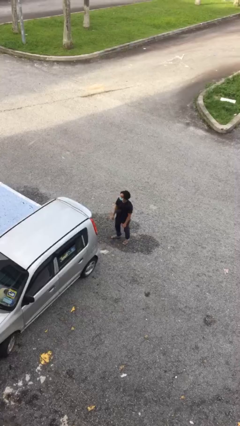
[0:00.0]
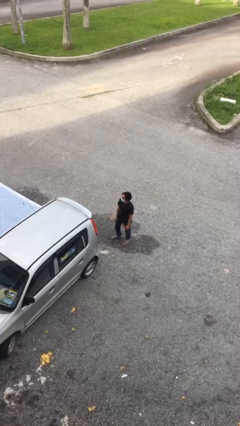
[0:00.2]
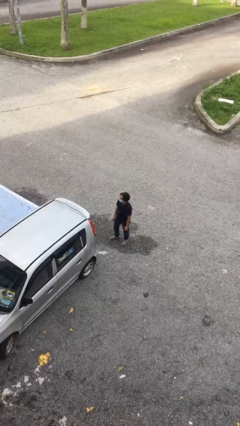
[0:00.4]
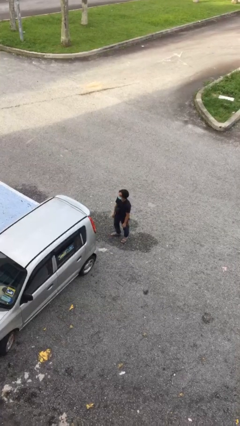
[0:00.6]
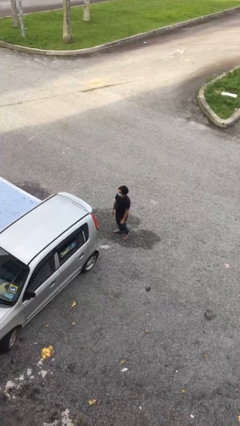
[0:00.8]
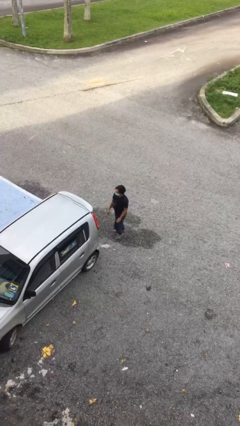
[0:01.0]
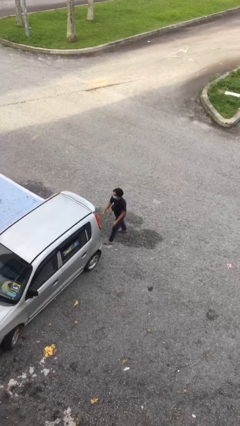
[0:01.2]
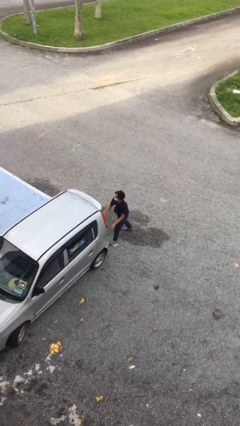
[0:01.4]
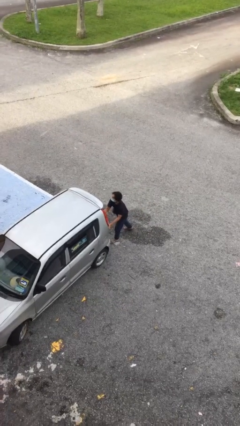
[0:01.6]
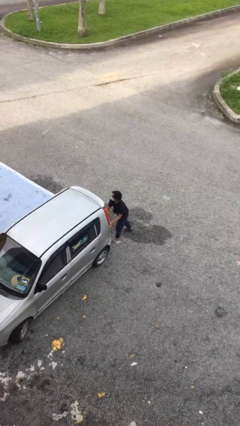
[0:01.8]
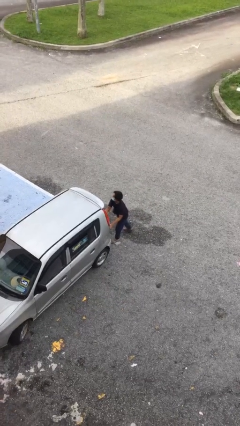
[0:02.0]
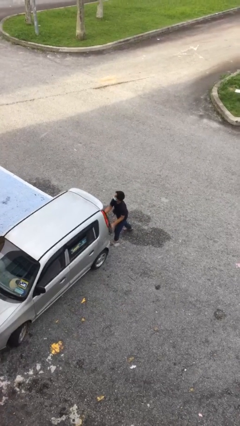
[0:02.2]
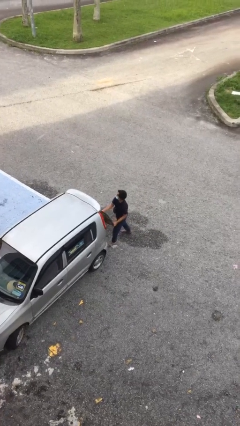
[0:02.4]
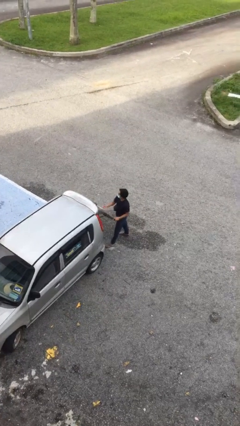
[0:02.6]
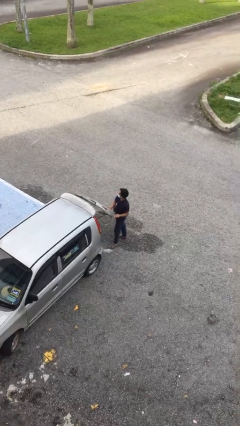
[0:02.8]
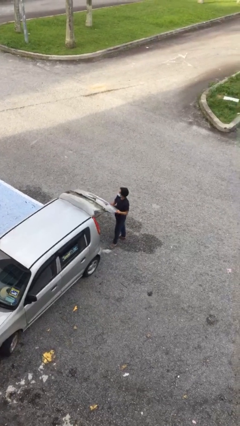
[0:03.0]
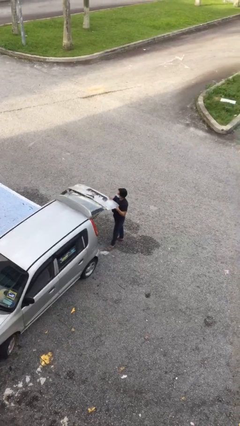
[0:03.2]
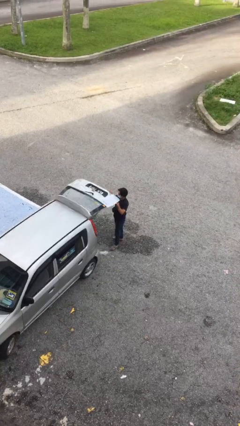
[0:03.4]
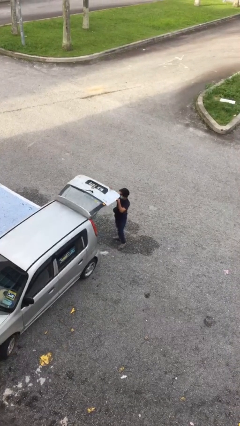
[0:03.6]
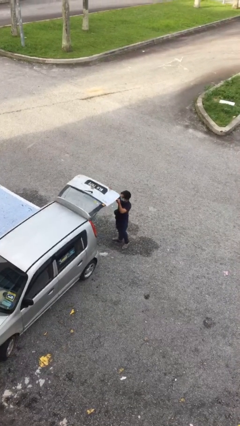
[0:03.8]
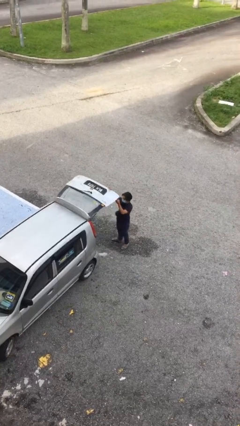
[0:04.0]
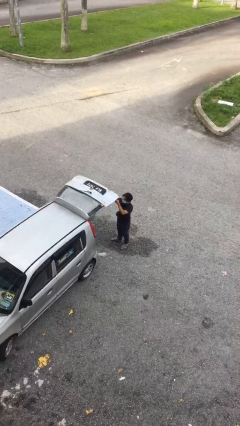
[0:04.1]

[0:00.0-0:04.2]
person opens car trunk

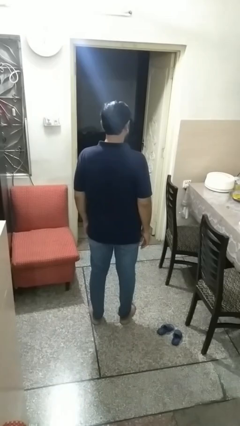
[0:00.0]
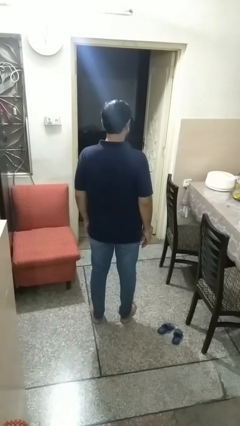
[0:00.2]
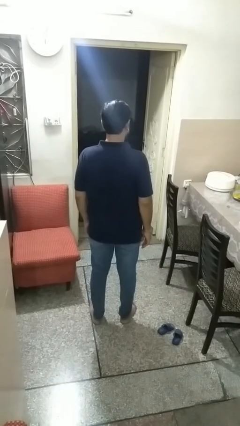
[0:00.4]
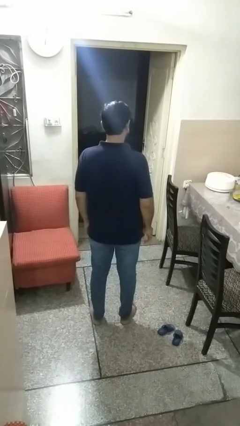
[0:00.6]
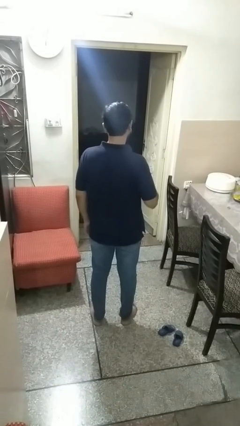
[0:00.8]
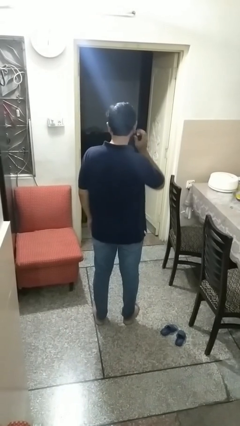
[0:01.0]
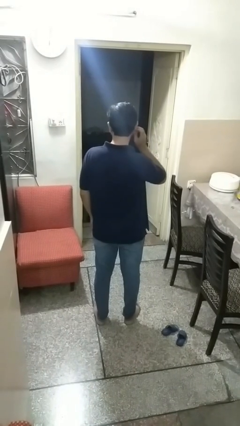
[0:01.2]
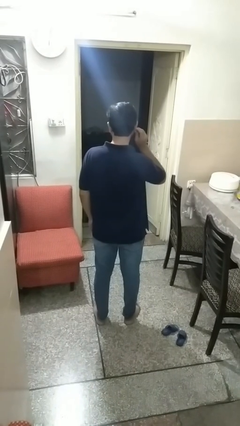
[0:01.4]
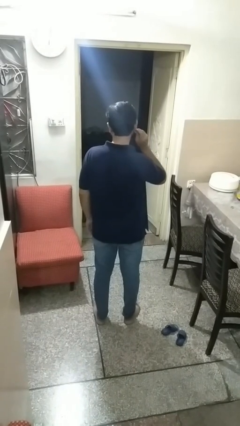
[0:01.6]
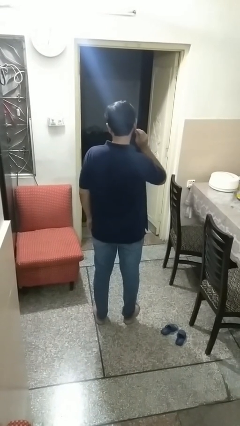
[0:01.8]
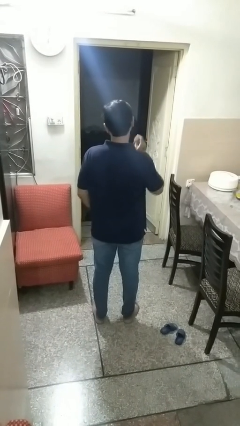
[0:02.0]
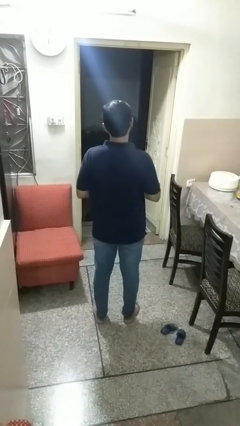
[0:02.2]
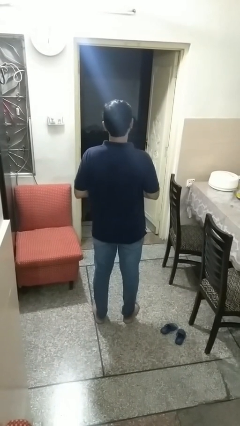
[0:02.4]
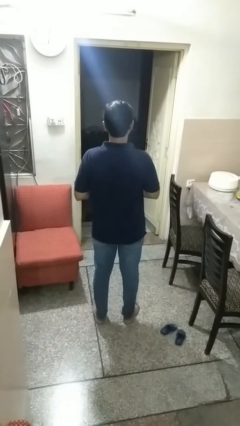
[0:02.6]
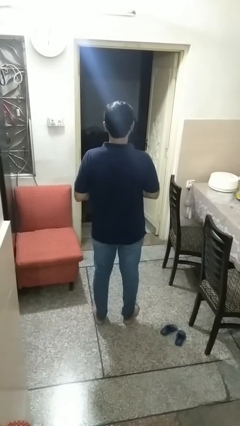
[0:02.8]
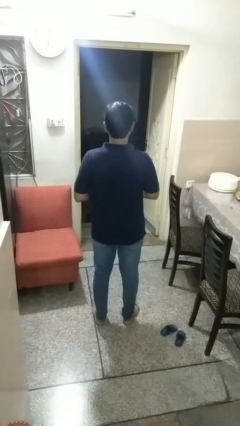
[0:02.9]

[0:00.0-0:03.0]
person takes off earrings

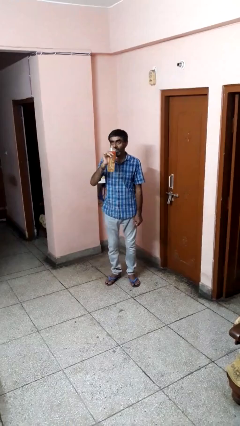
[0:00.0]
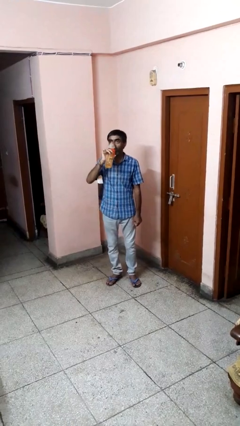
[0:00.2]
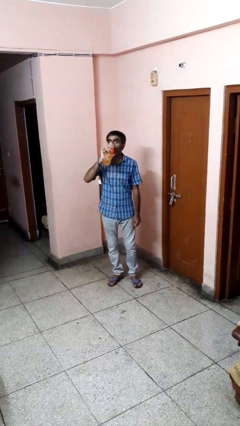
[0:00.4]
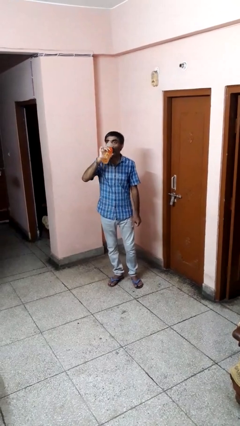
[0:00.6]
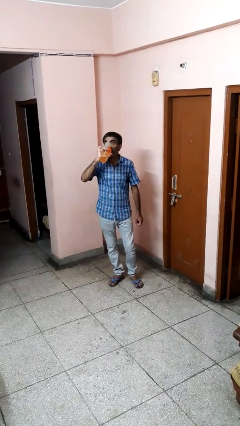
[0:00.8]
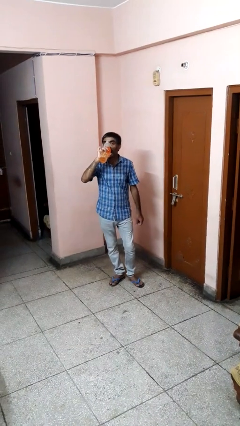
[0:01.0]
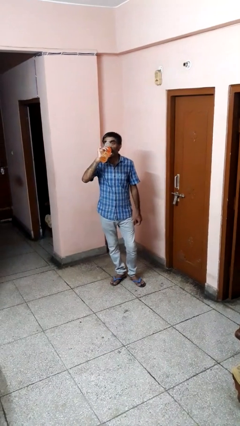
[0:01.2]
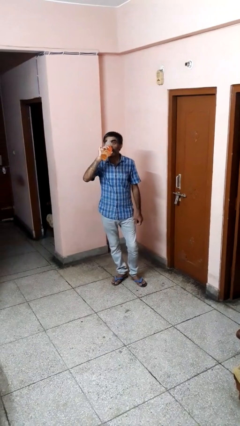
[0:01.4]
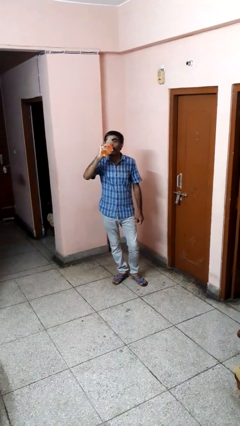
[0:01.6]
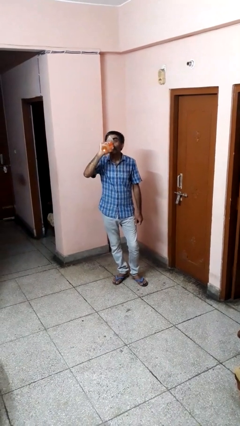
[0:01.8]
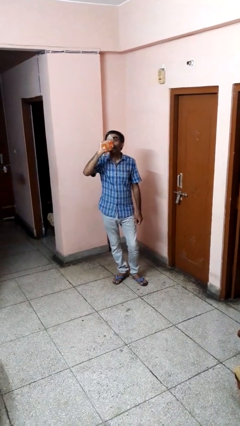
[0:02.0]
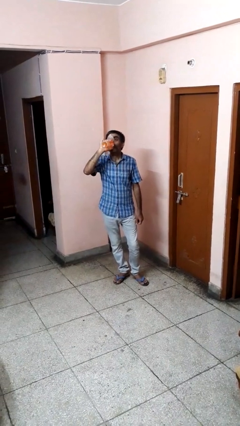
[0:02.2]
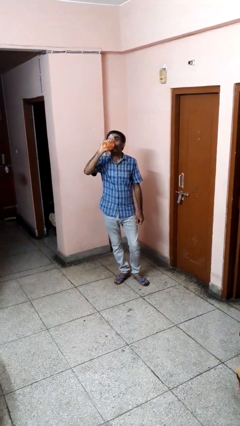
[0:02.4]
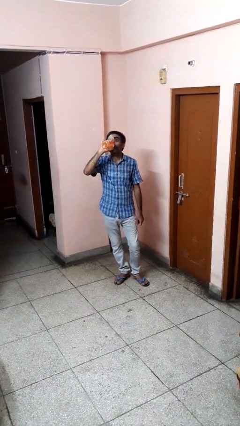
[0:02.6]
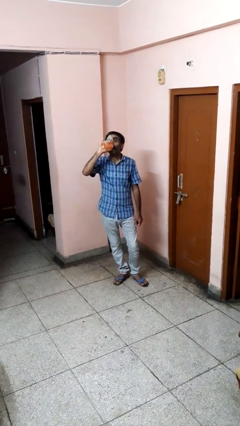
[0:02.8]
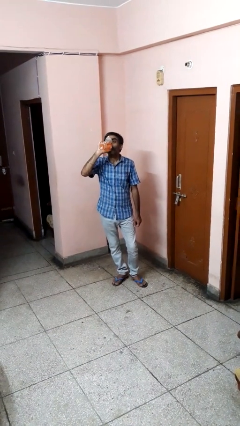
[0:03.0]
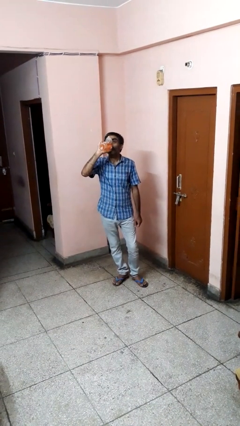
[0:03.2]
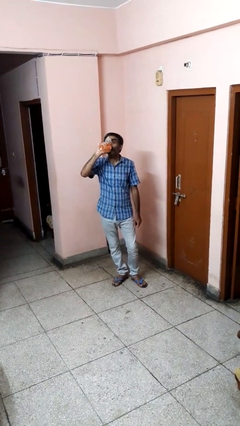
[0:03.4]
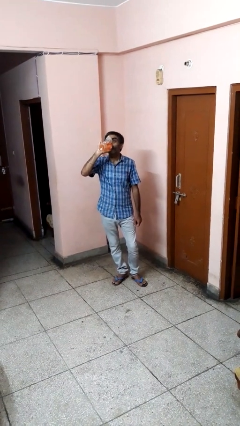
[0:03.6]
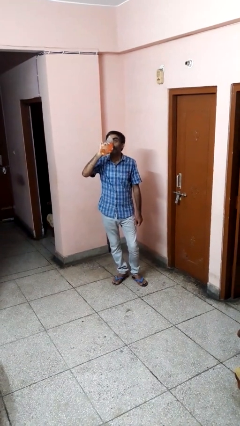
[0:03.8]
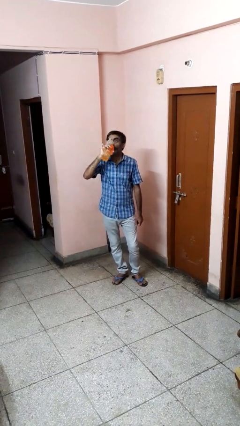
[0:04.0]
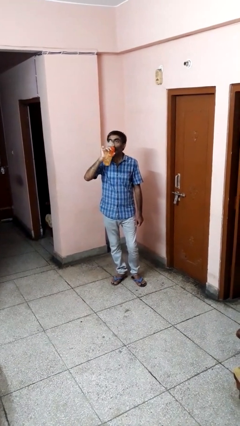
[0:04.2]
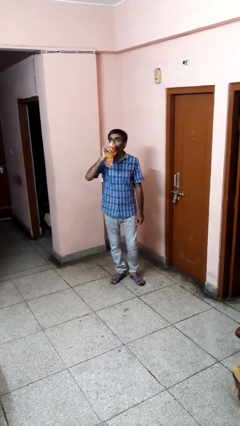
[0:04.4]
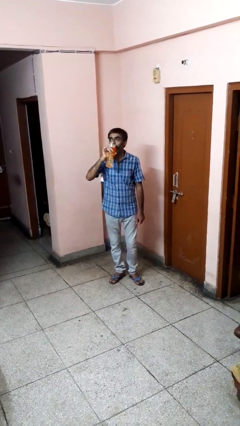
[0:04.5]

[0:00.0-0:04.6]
person drinks from bottle

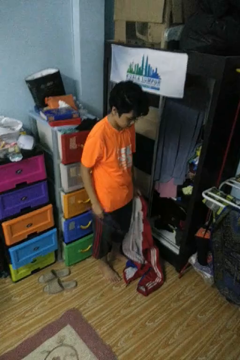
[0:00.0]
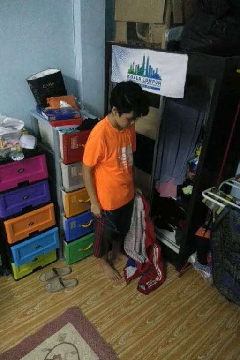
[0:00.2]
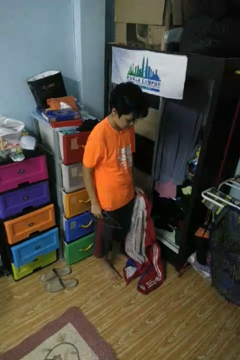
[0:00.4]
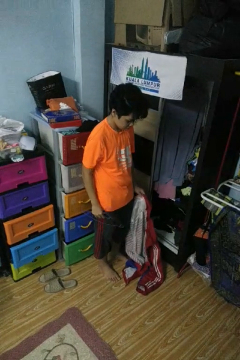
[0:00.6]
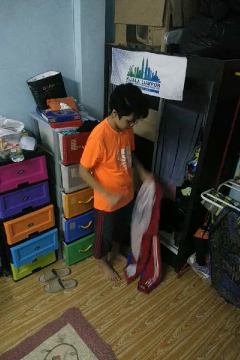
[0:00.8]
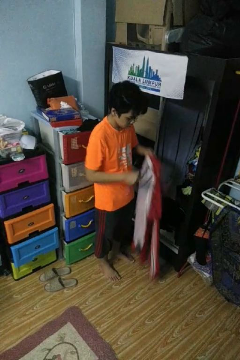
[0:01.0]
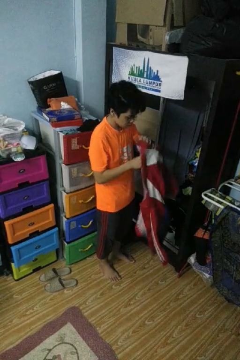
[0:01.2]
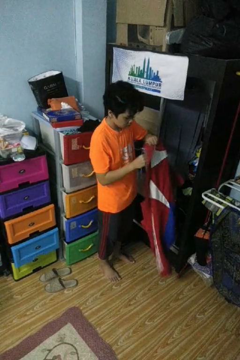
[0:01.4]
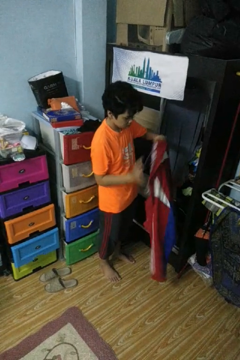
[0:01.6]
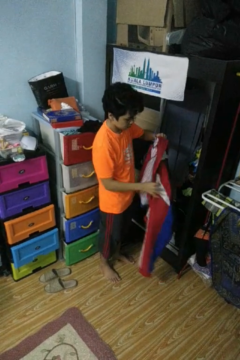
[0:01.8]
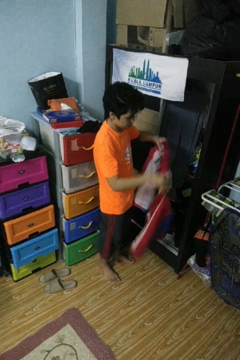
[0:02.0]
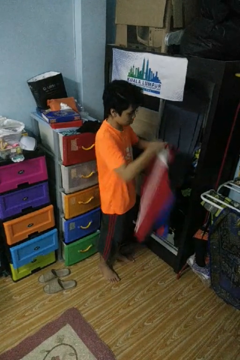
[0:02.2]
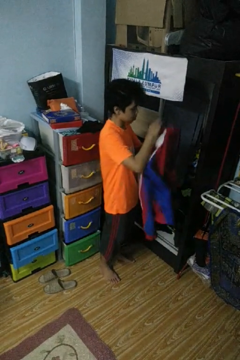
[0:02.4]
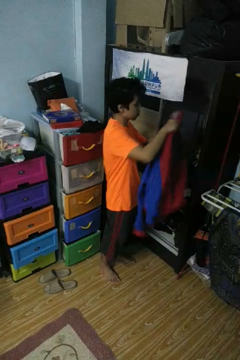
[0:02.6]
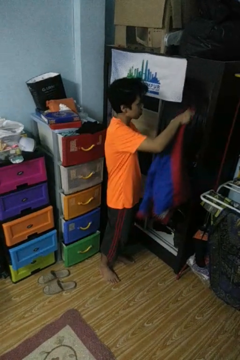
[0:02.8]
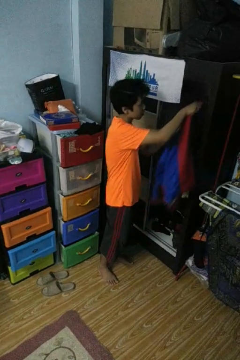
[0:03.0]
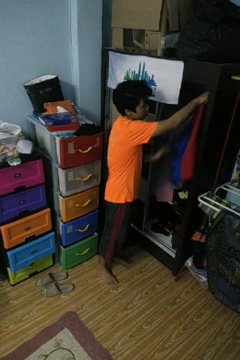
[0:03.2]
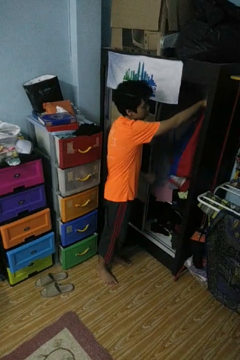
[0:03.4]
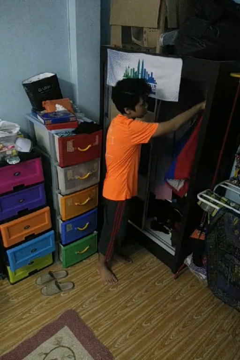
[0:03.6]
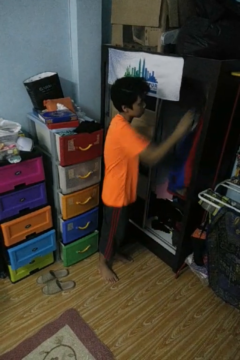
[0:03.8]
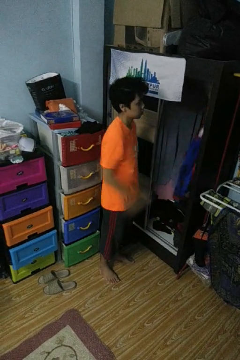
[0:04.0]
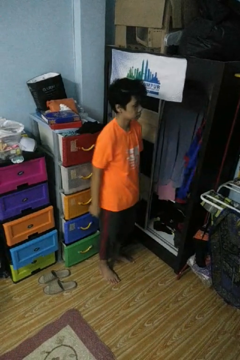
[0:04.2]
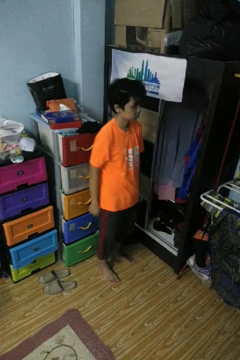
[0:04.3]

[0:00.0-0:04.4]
person puts clothes into closet

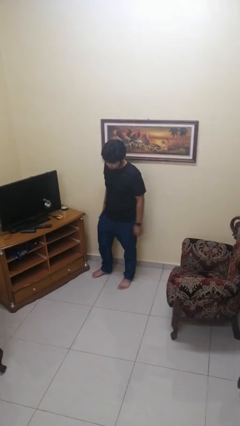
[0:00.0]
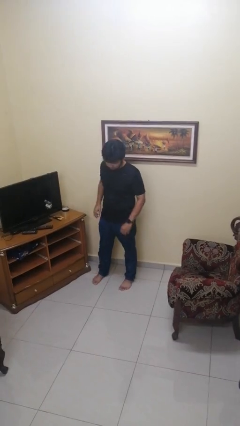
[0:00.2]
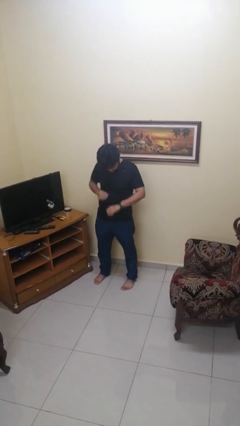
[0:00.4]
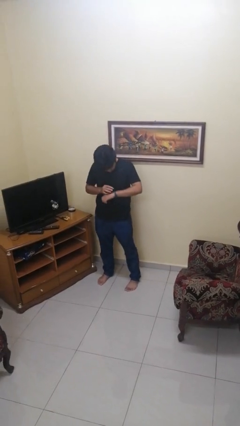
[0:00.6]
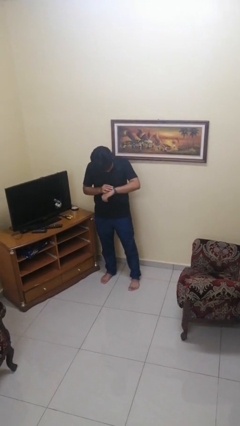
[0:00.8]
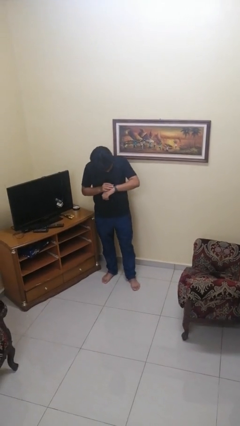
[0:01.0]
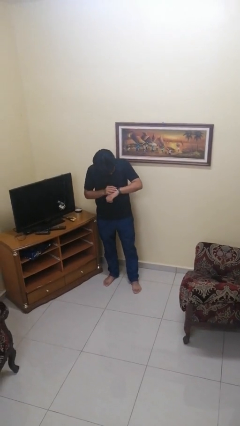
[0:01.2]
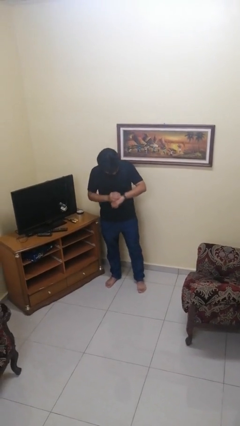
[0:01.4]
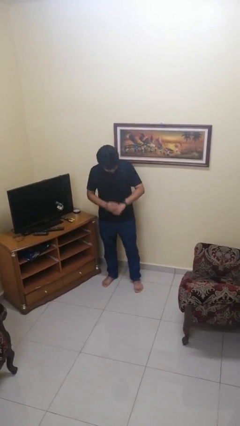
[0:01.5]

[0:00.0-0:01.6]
person looks at wristwatch

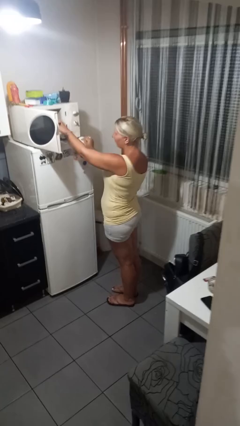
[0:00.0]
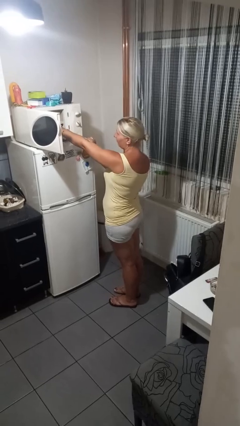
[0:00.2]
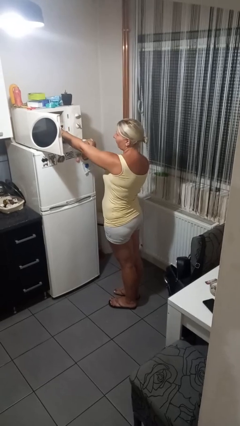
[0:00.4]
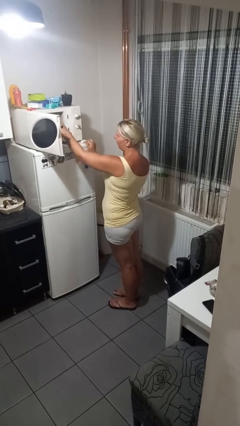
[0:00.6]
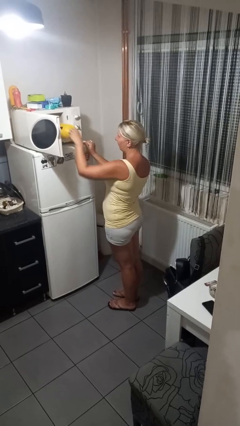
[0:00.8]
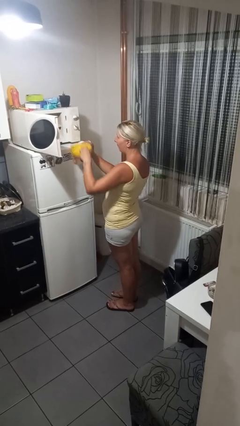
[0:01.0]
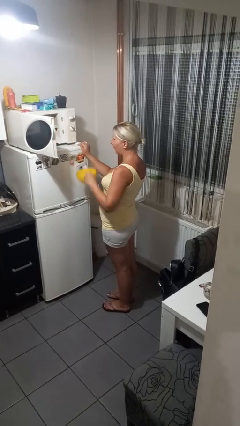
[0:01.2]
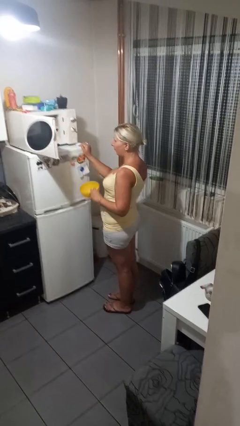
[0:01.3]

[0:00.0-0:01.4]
person takes object from microwave
